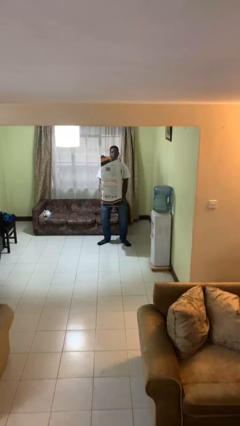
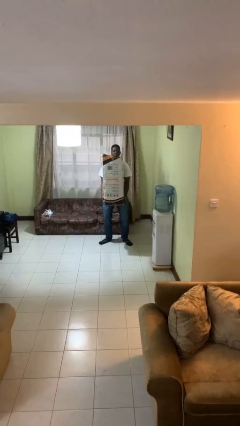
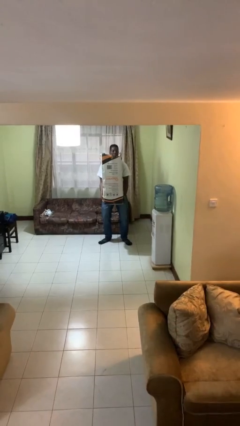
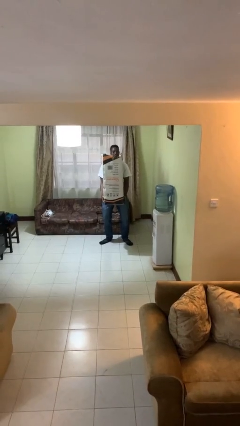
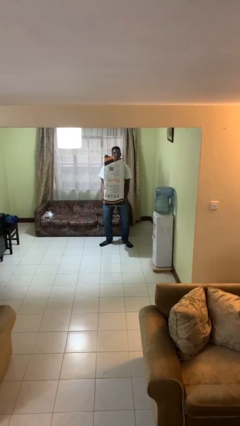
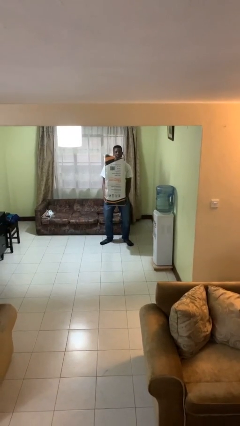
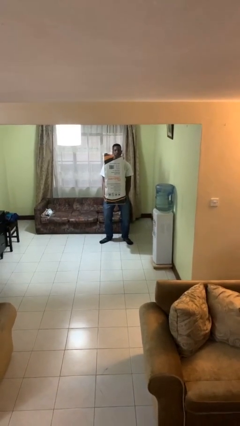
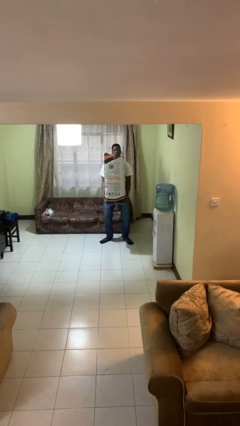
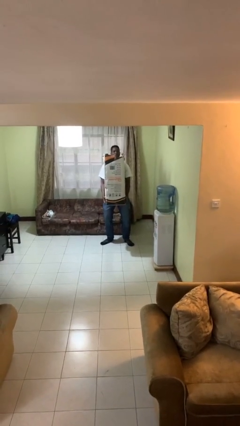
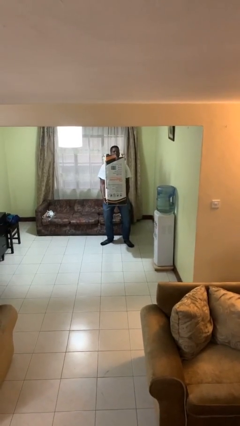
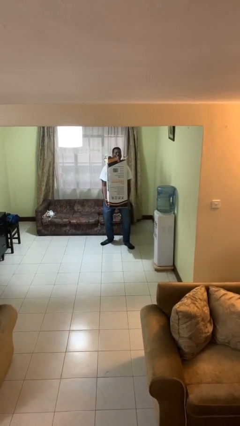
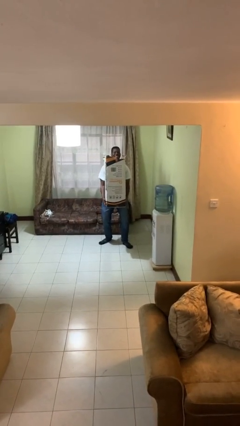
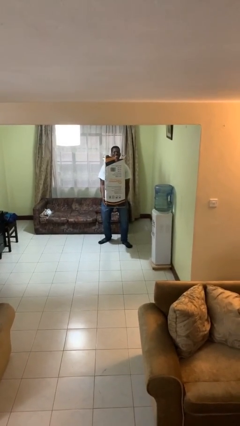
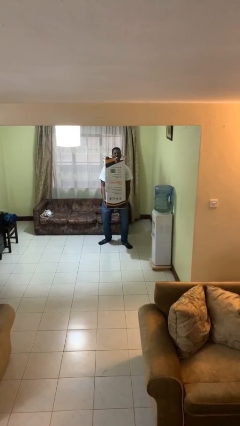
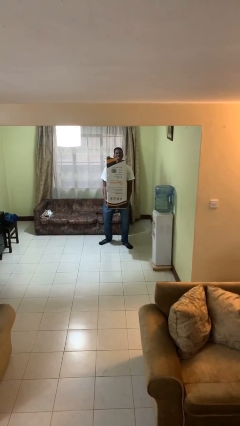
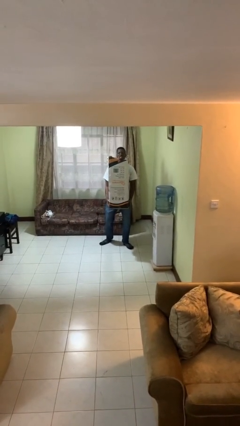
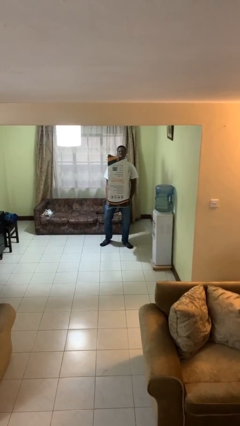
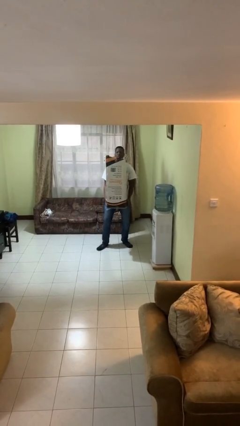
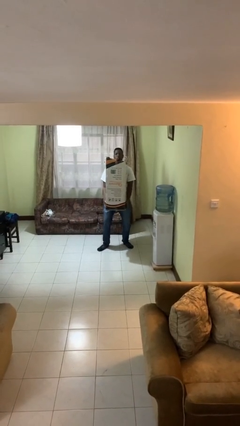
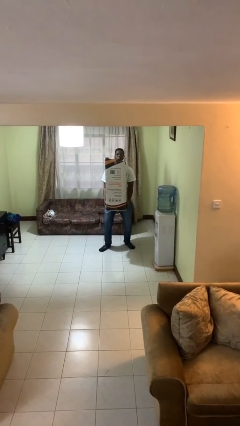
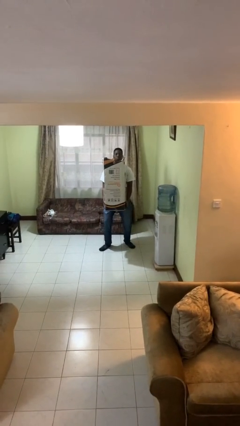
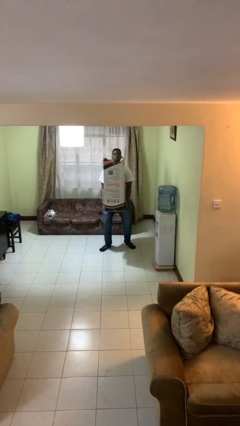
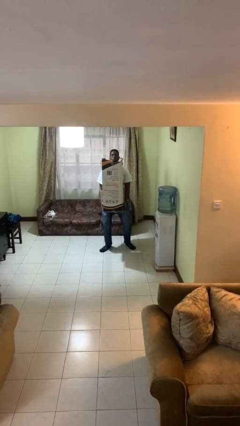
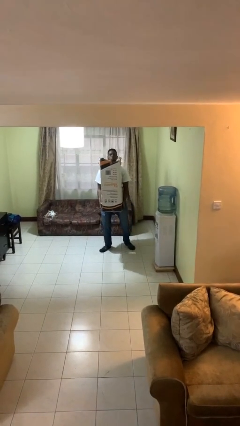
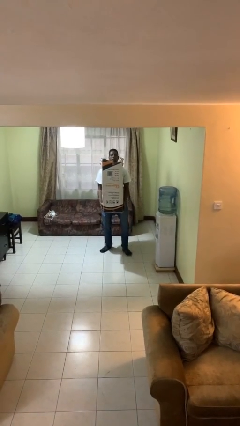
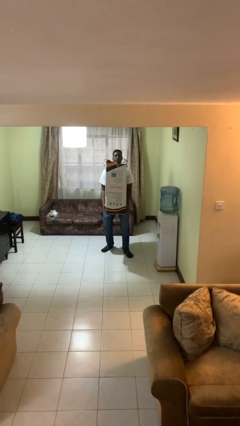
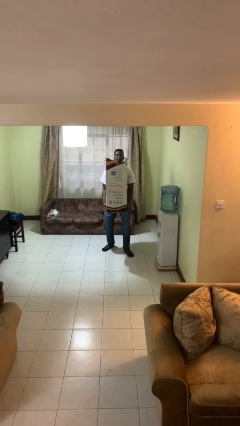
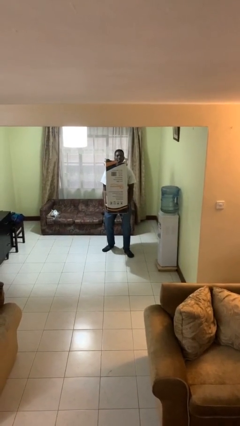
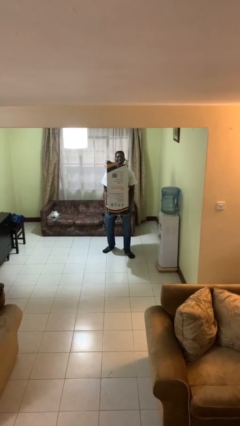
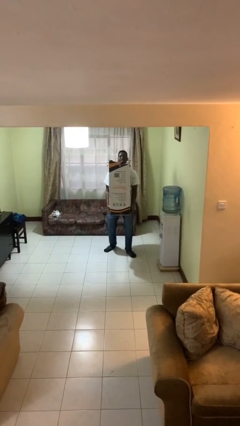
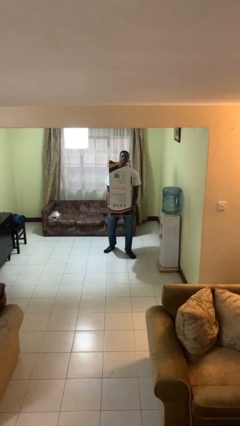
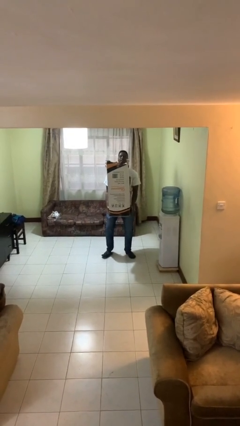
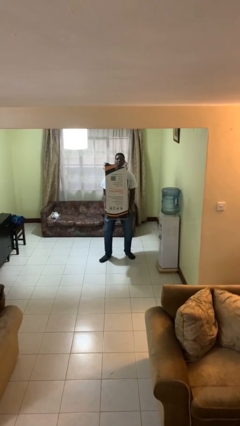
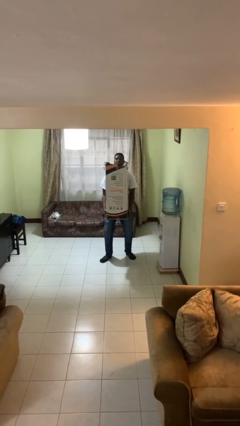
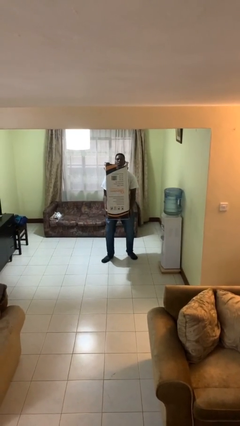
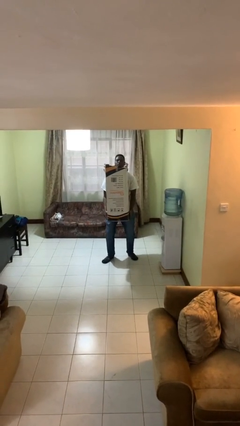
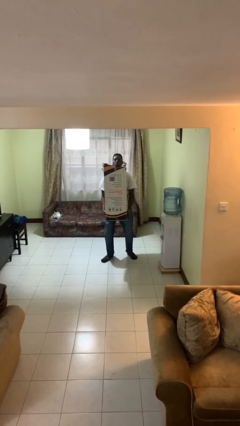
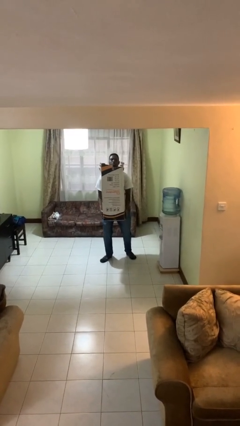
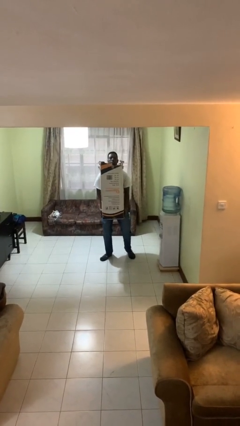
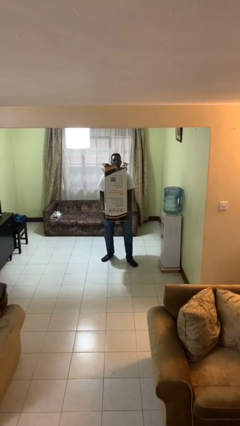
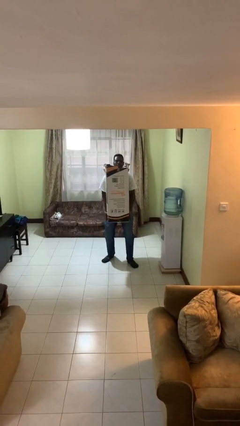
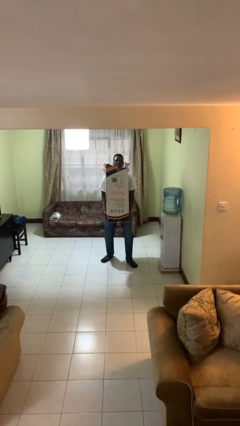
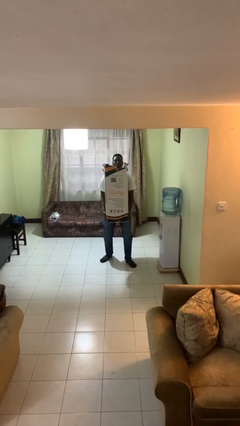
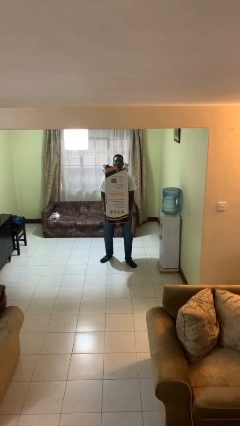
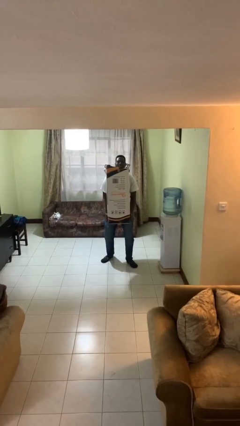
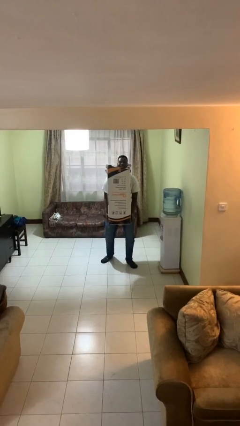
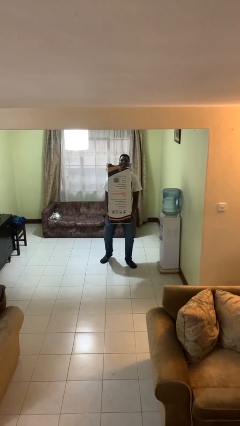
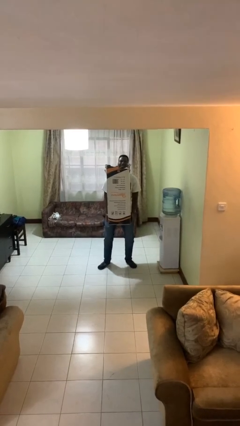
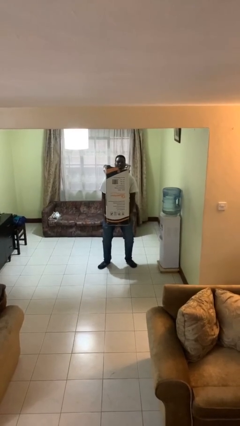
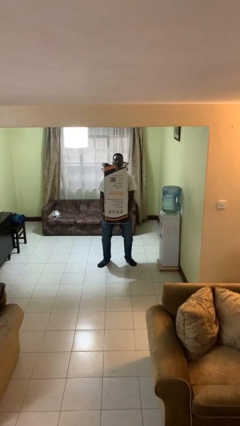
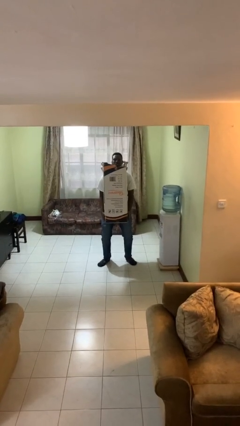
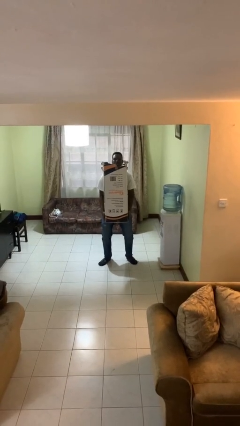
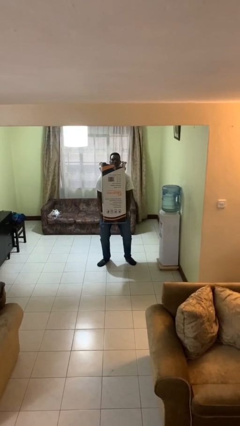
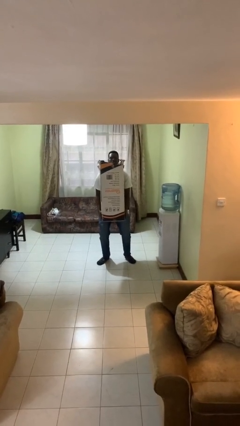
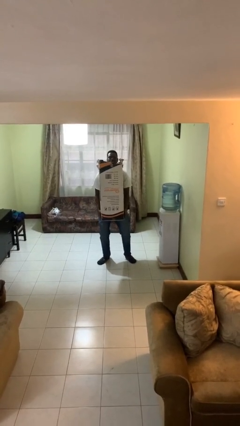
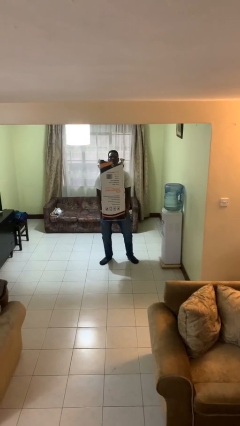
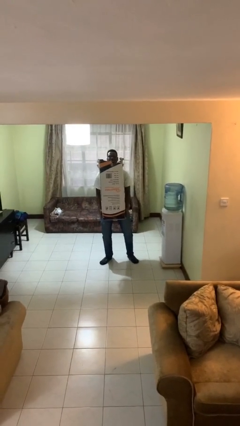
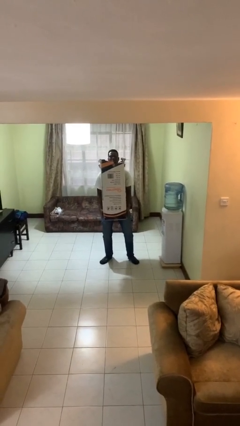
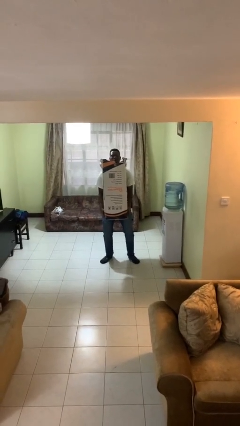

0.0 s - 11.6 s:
person carries heavy object

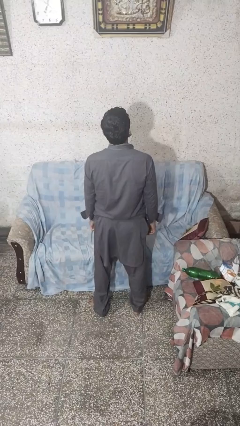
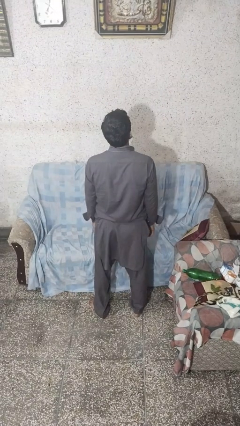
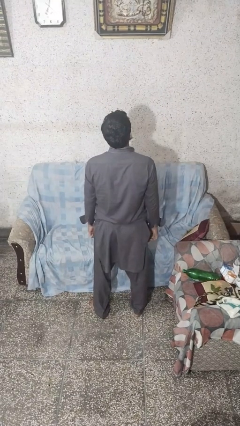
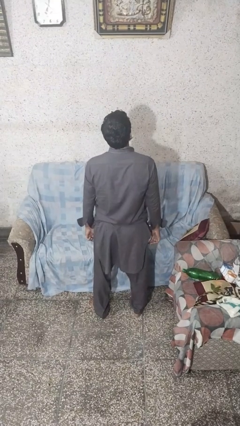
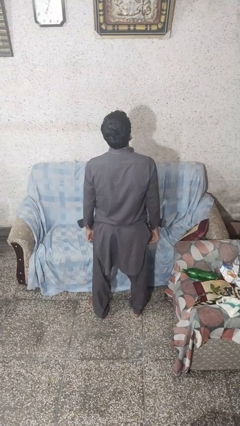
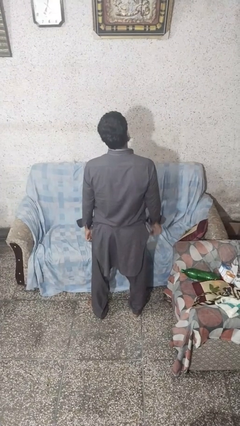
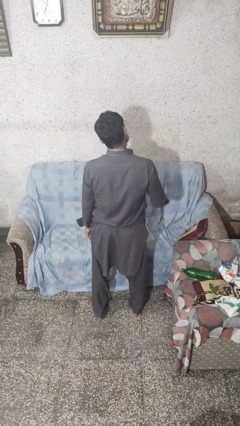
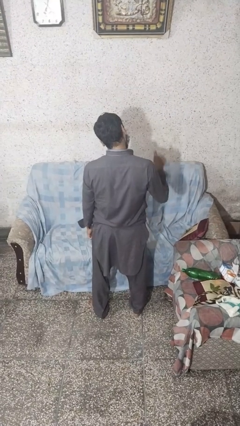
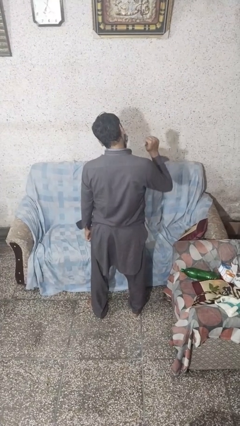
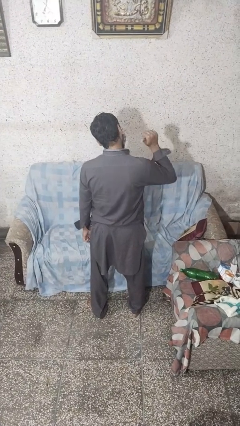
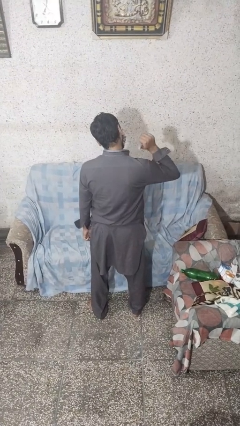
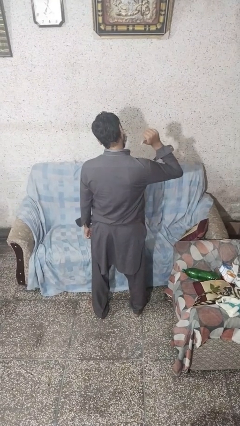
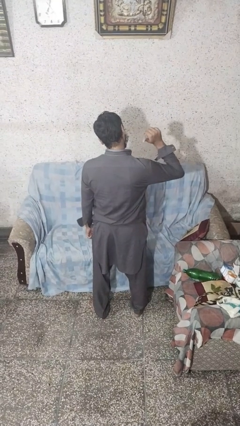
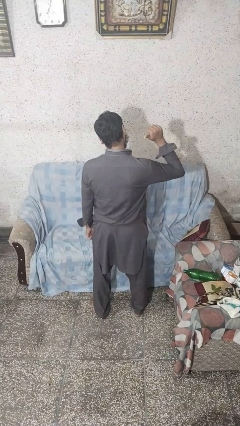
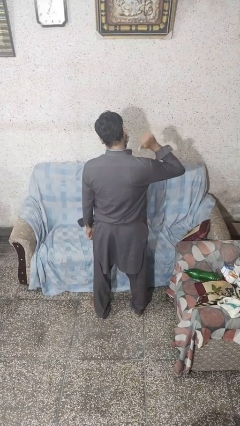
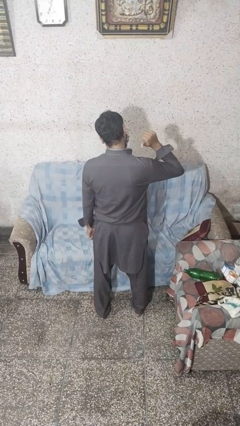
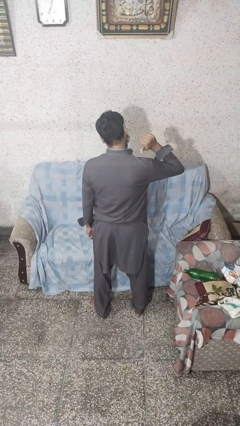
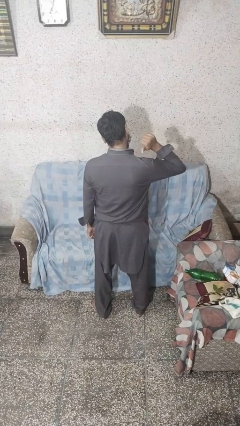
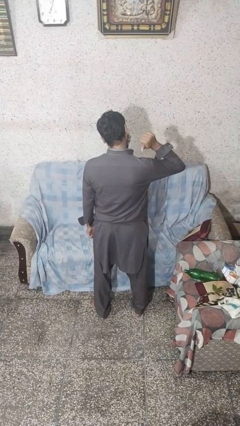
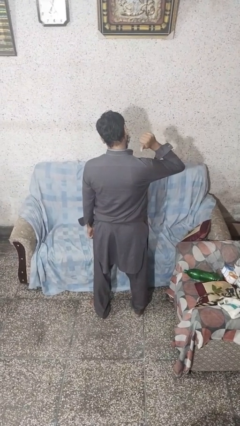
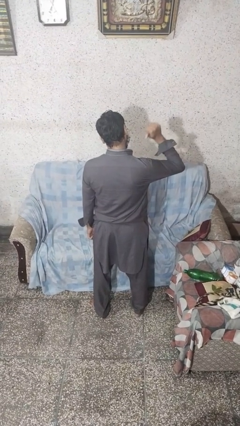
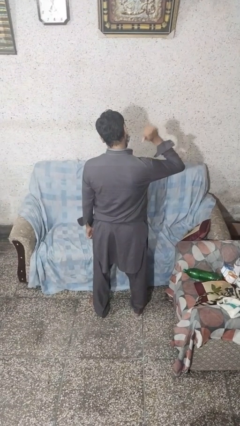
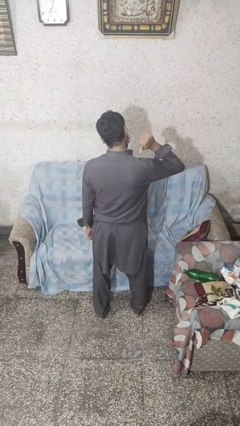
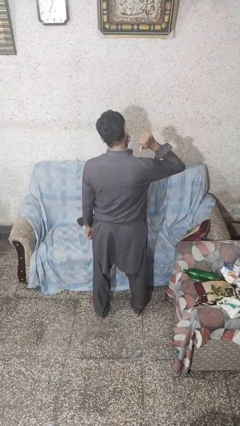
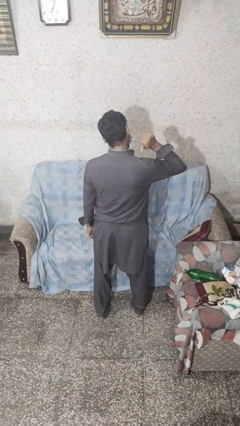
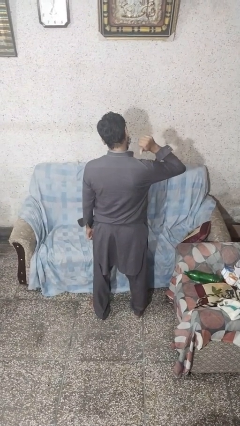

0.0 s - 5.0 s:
person gestures behind me

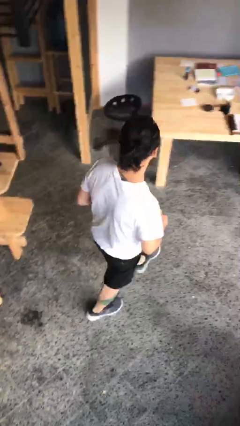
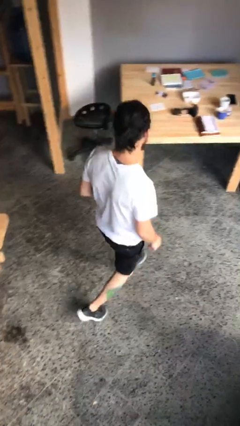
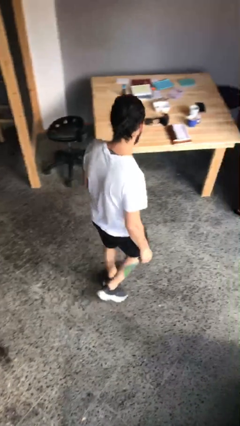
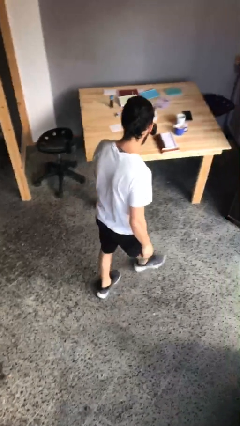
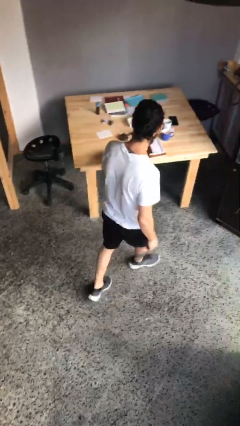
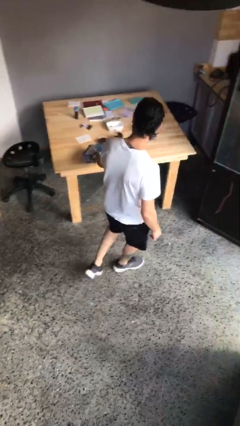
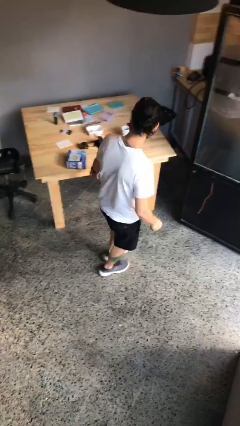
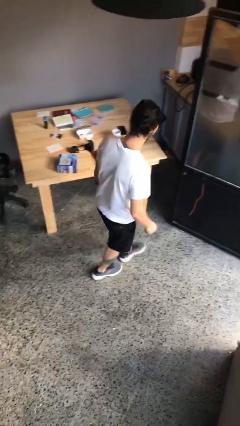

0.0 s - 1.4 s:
person puts down object on table
